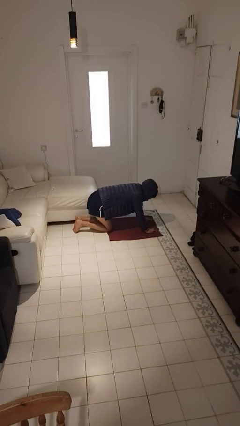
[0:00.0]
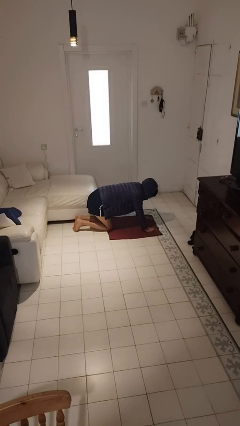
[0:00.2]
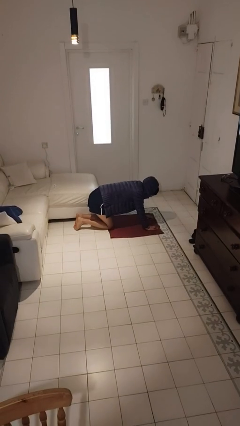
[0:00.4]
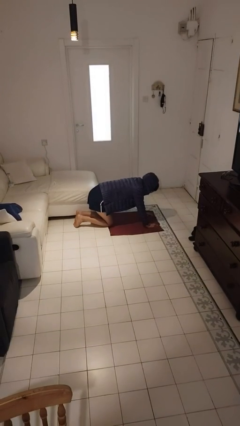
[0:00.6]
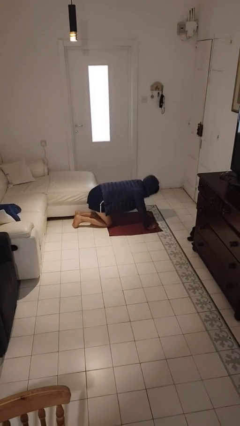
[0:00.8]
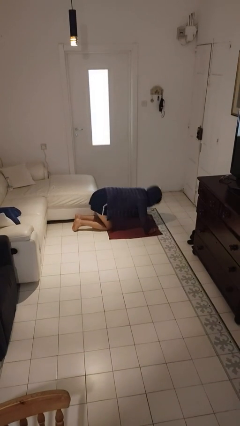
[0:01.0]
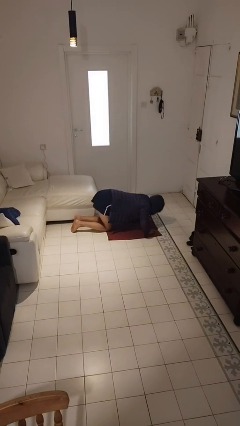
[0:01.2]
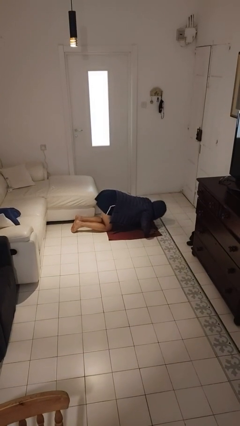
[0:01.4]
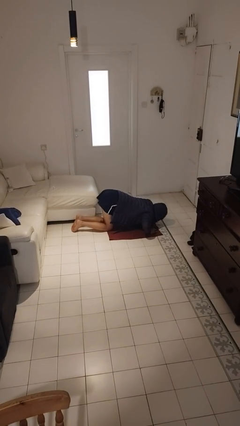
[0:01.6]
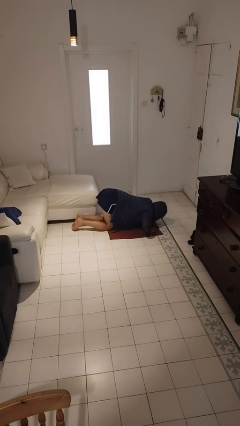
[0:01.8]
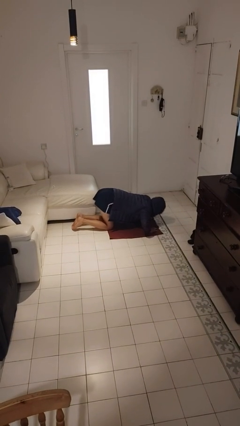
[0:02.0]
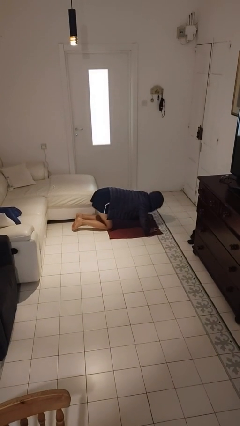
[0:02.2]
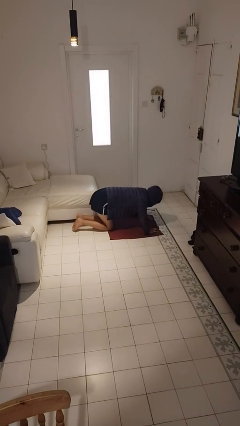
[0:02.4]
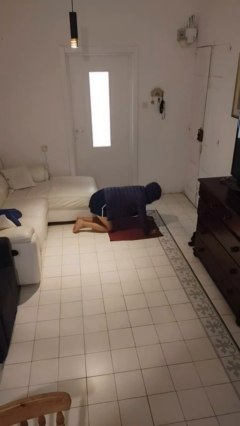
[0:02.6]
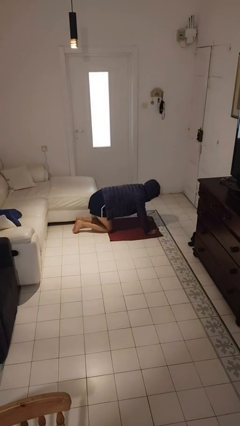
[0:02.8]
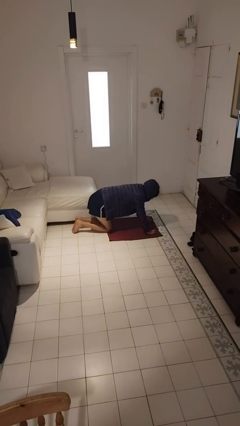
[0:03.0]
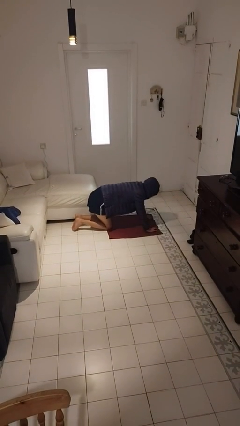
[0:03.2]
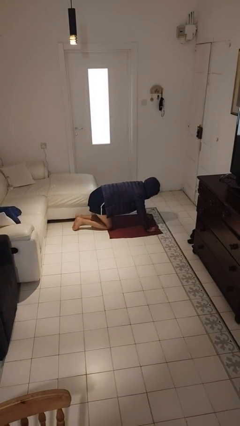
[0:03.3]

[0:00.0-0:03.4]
person exercises with pushup

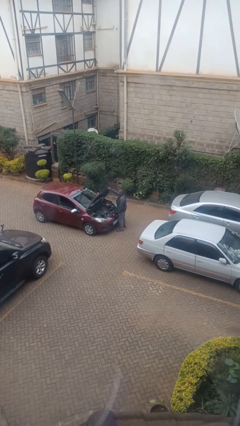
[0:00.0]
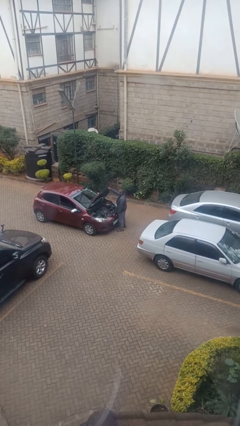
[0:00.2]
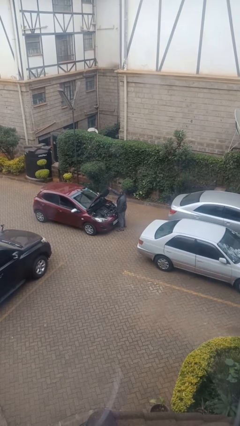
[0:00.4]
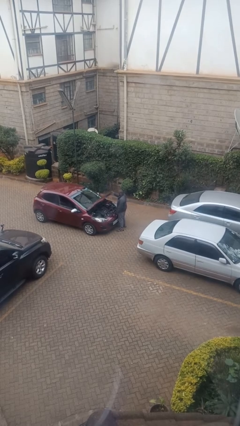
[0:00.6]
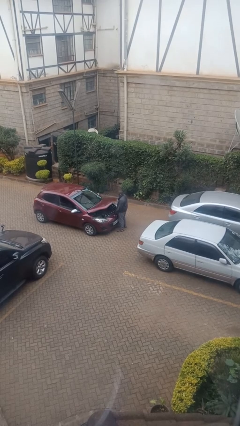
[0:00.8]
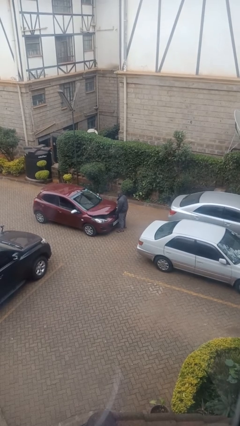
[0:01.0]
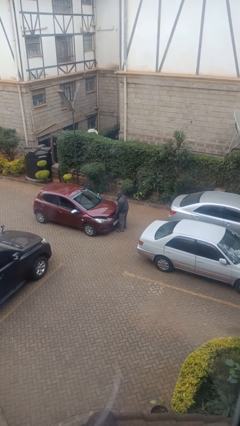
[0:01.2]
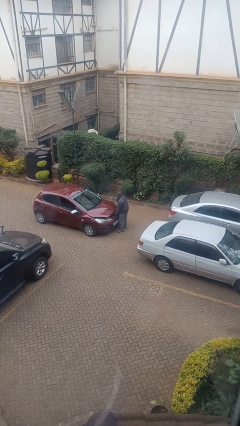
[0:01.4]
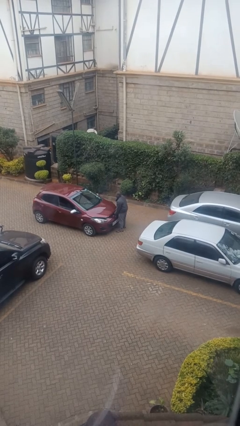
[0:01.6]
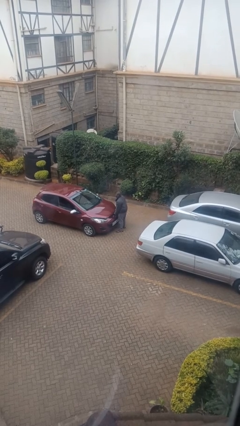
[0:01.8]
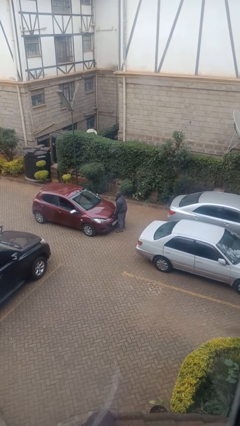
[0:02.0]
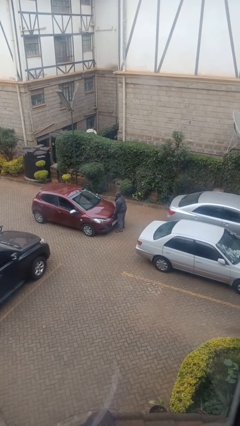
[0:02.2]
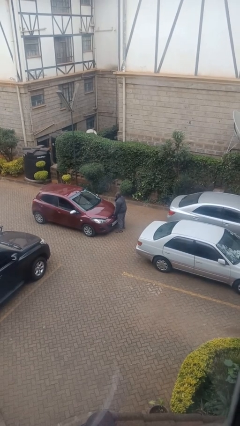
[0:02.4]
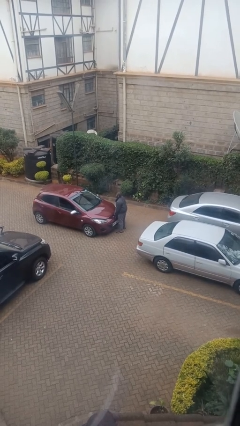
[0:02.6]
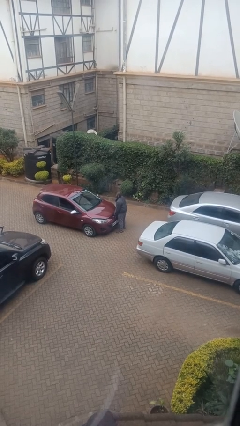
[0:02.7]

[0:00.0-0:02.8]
person closes car hood

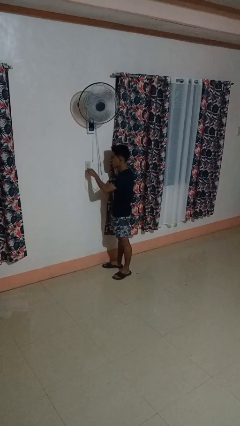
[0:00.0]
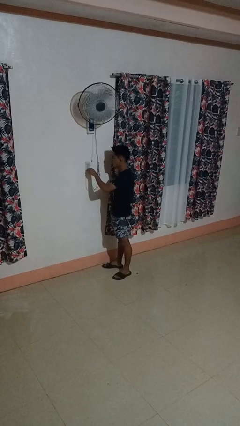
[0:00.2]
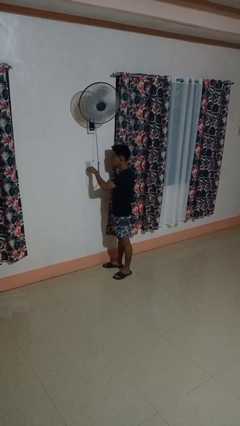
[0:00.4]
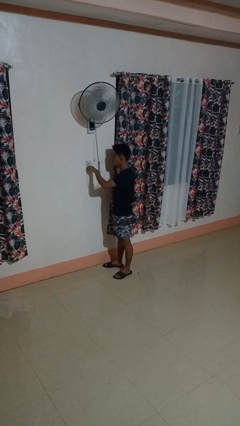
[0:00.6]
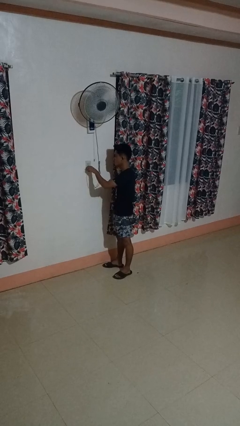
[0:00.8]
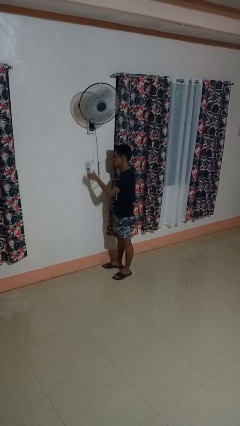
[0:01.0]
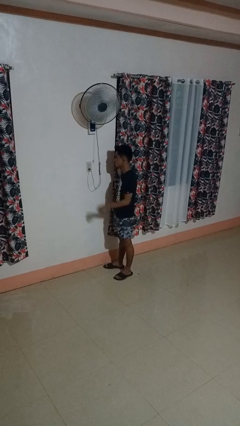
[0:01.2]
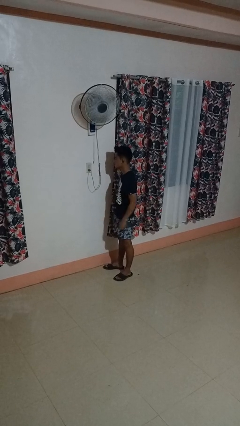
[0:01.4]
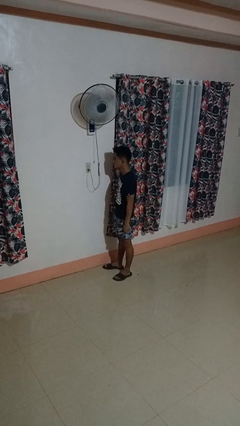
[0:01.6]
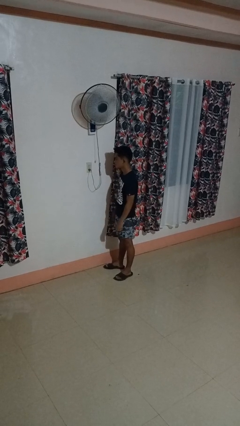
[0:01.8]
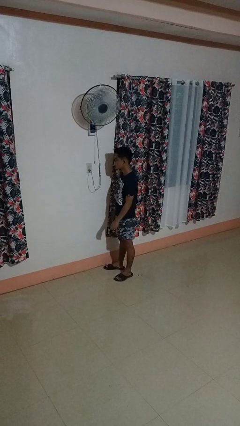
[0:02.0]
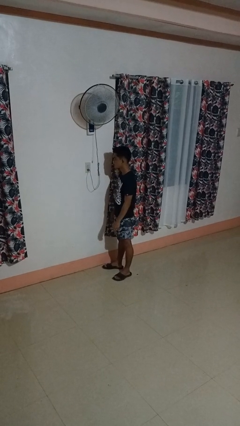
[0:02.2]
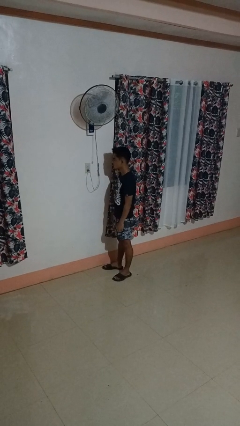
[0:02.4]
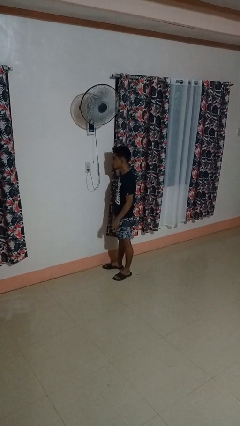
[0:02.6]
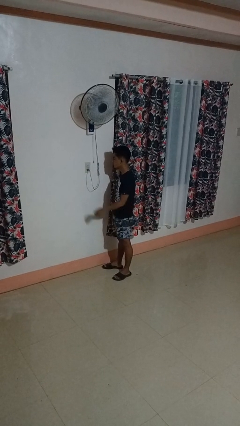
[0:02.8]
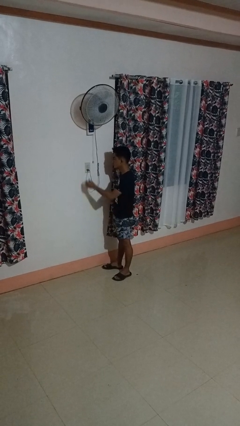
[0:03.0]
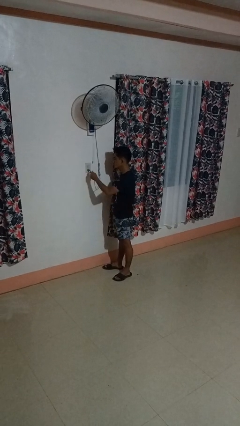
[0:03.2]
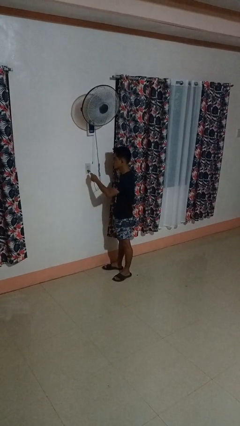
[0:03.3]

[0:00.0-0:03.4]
person plugs into electrical socket

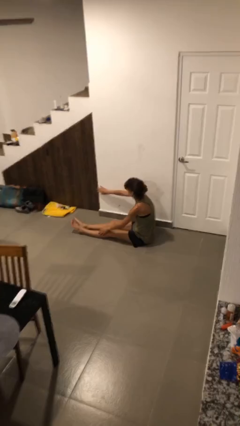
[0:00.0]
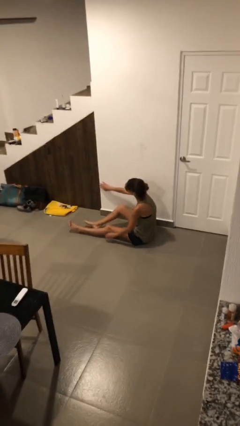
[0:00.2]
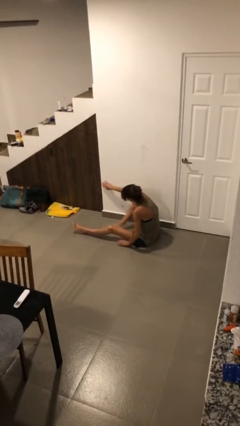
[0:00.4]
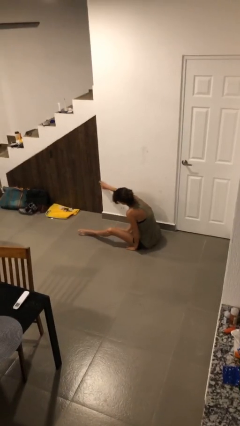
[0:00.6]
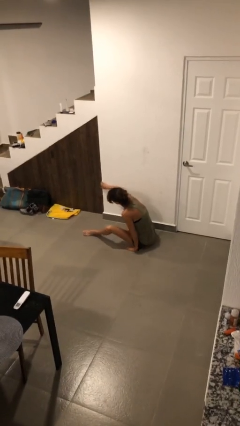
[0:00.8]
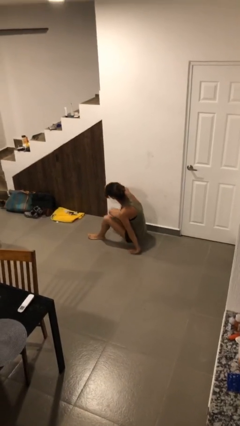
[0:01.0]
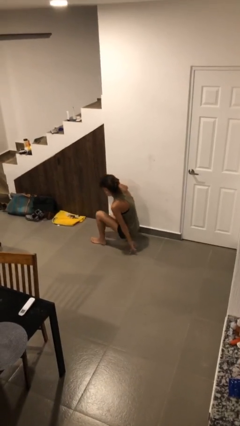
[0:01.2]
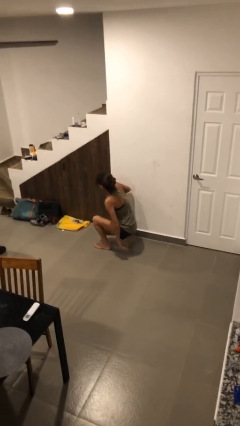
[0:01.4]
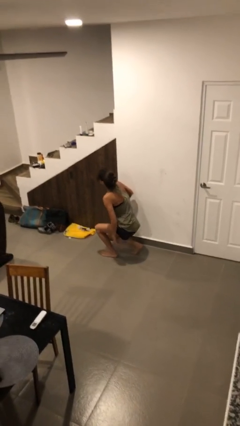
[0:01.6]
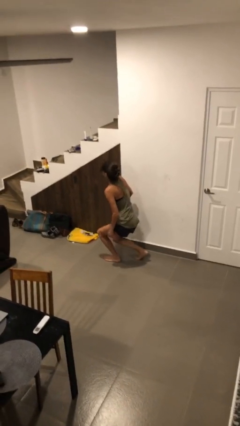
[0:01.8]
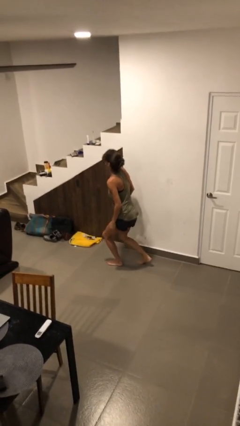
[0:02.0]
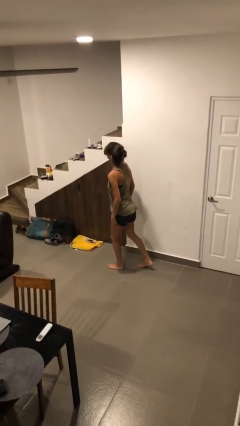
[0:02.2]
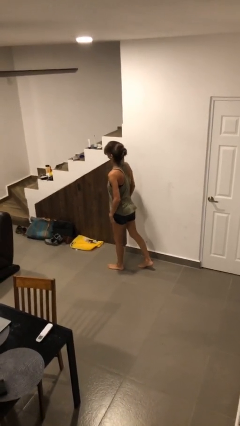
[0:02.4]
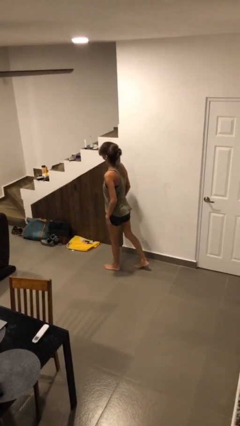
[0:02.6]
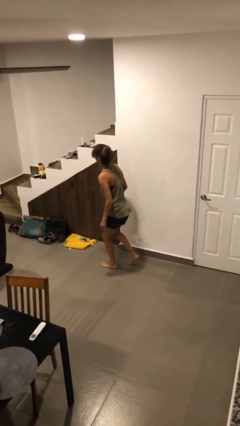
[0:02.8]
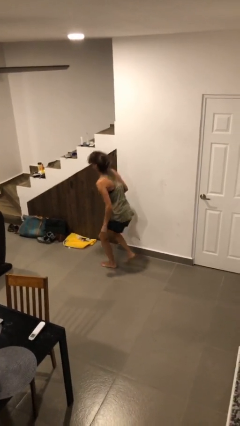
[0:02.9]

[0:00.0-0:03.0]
person stands up

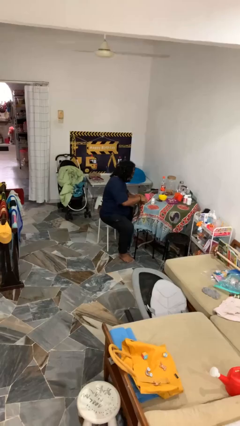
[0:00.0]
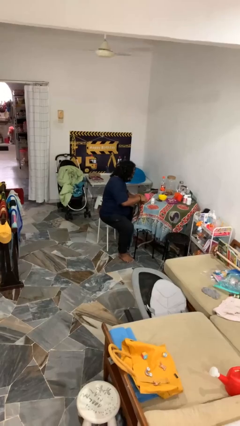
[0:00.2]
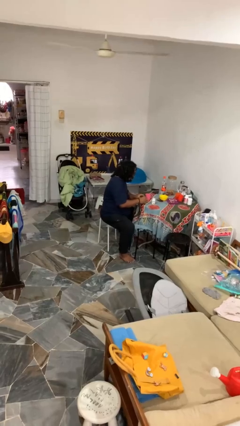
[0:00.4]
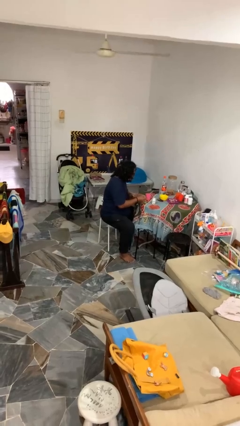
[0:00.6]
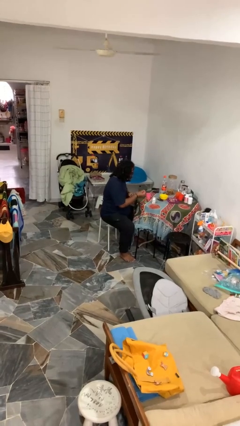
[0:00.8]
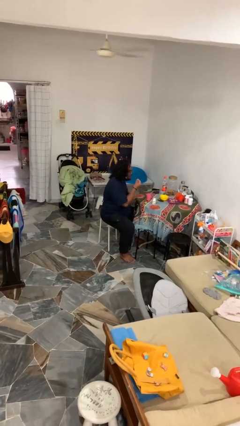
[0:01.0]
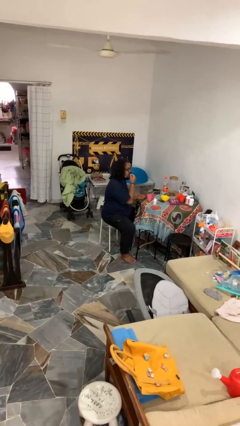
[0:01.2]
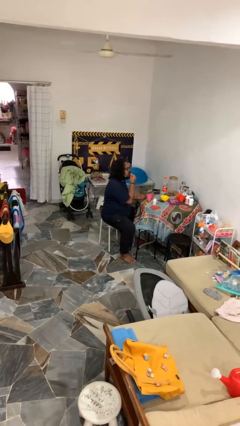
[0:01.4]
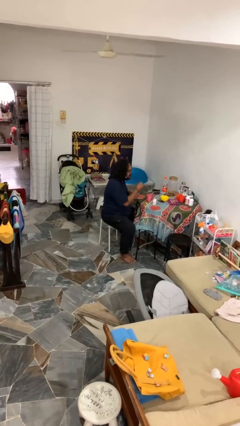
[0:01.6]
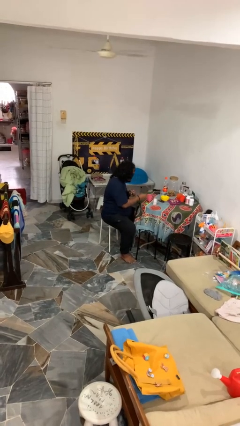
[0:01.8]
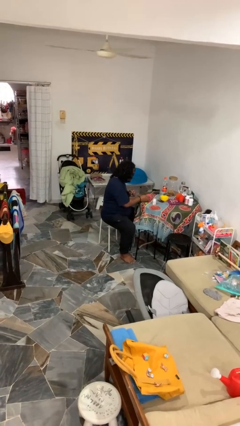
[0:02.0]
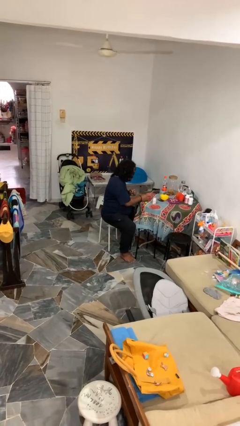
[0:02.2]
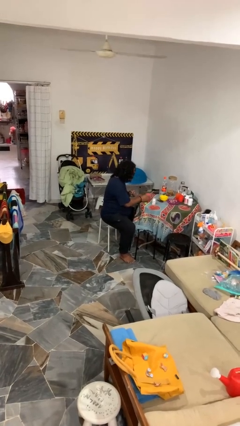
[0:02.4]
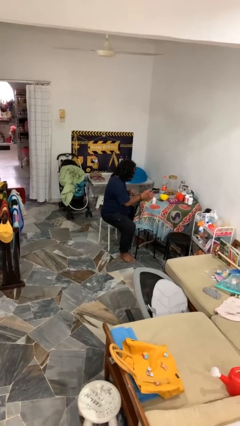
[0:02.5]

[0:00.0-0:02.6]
person takes medicine pills

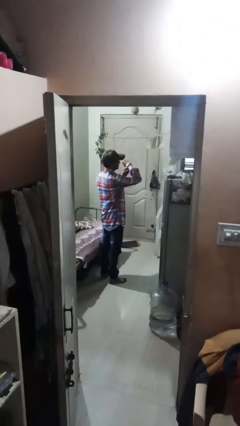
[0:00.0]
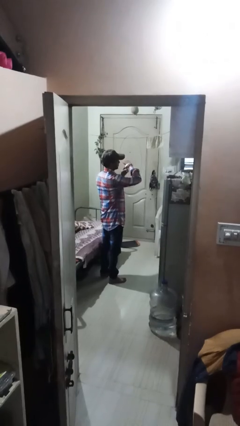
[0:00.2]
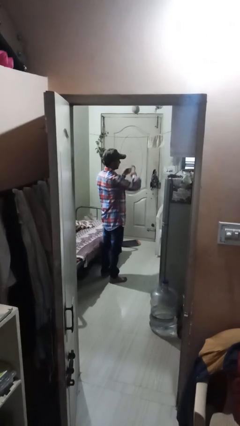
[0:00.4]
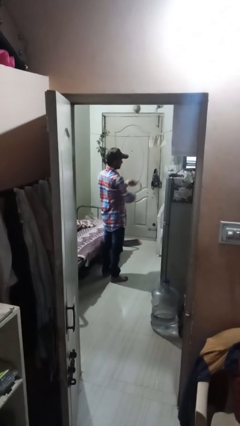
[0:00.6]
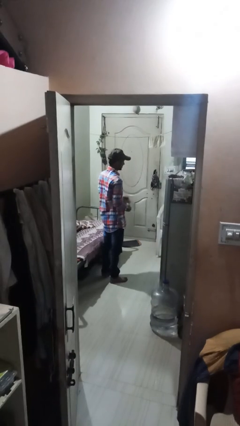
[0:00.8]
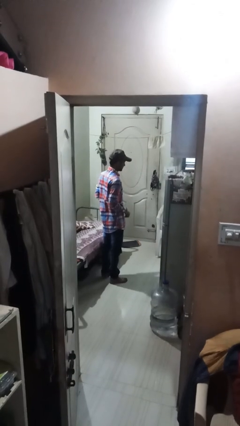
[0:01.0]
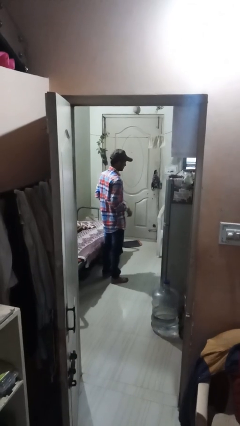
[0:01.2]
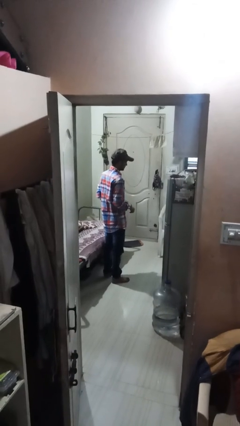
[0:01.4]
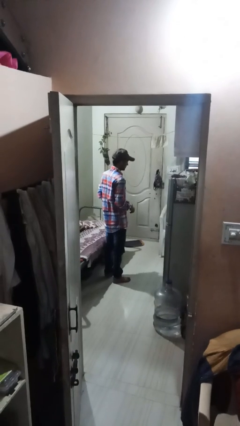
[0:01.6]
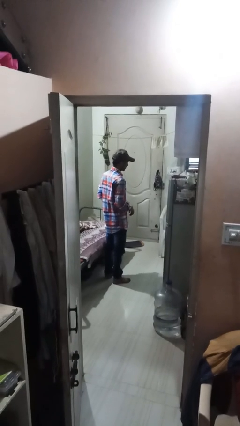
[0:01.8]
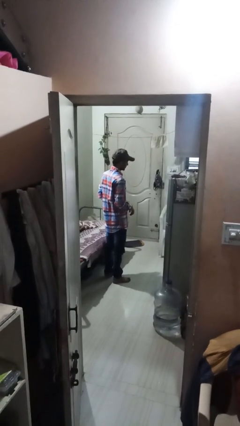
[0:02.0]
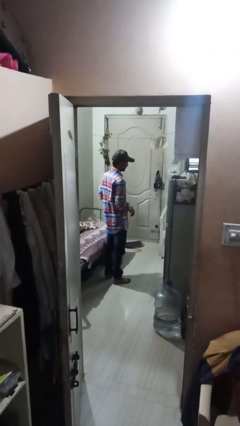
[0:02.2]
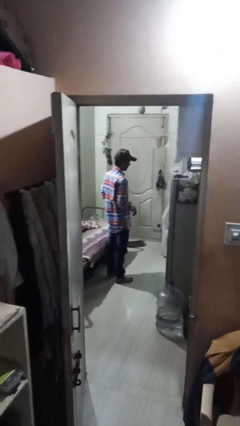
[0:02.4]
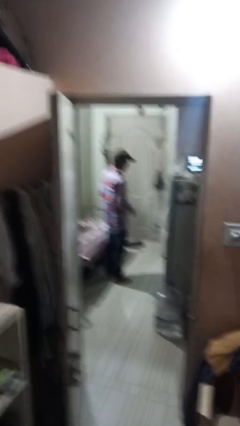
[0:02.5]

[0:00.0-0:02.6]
person takes off wristwatch
